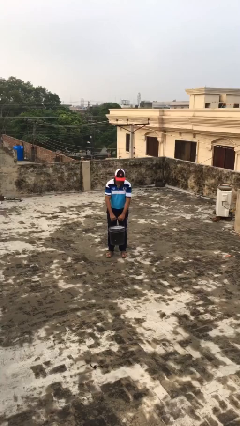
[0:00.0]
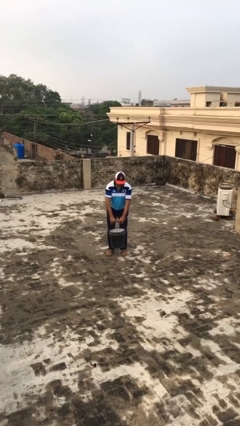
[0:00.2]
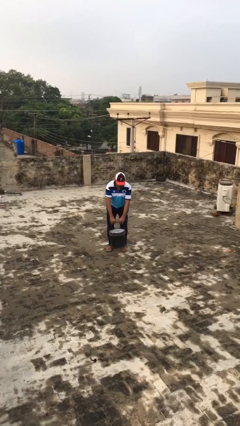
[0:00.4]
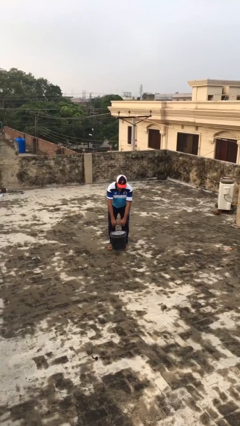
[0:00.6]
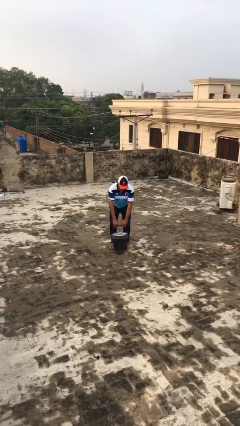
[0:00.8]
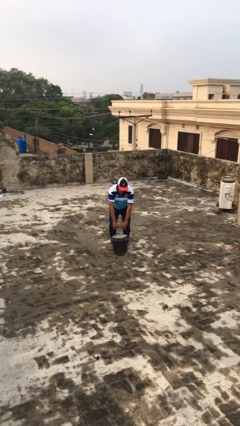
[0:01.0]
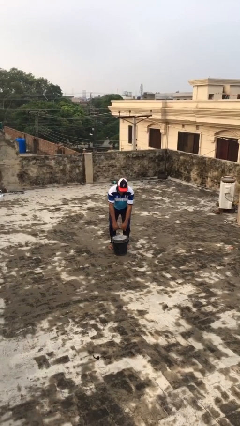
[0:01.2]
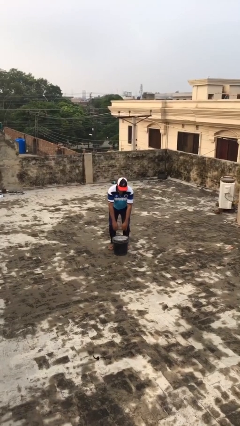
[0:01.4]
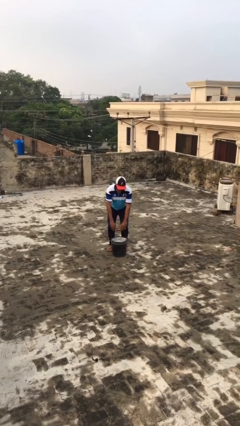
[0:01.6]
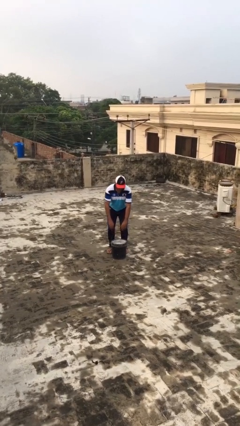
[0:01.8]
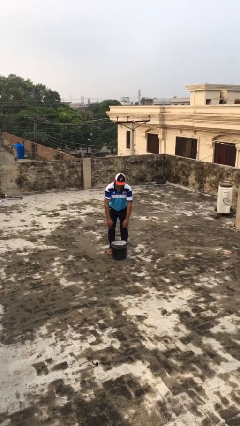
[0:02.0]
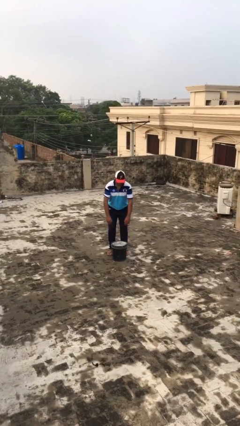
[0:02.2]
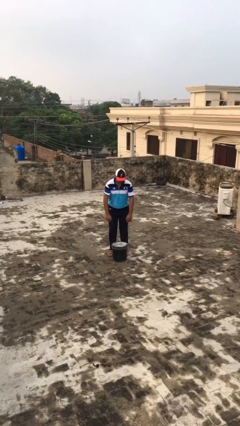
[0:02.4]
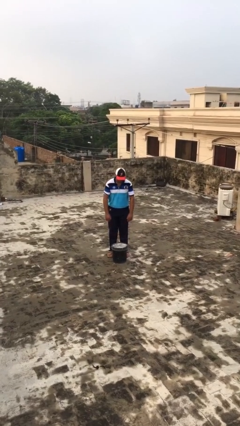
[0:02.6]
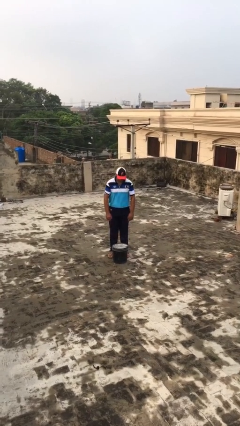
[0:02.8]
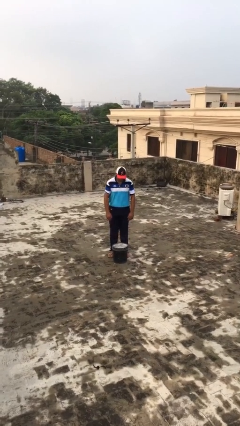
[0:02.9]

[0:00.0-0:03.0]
person puts down object on floor

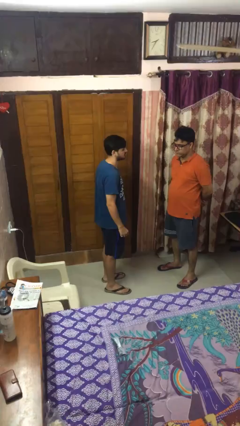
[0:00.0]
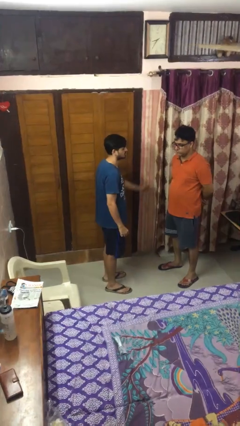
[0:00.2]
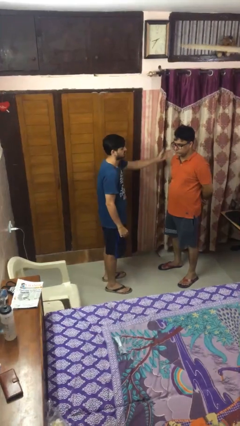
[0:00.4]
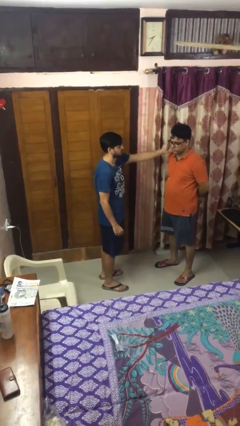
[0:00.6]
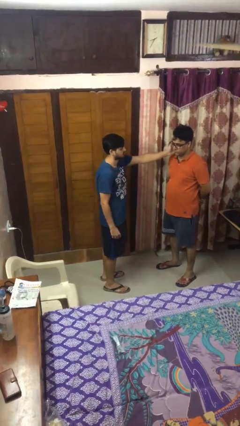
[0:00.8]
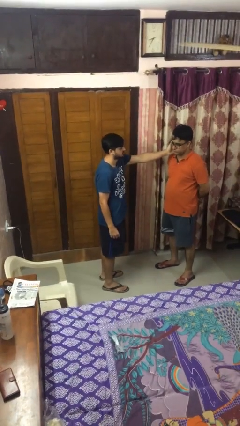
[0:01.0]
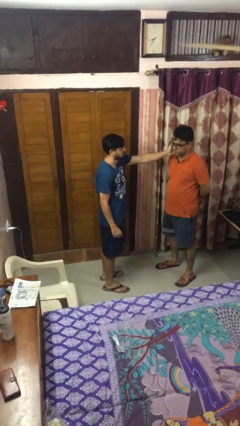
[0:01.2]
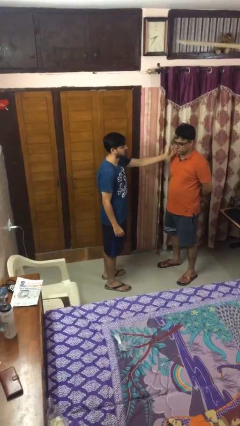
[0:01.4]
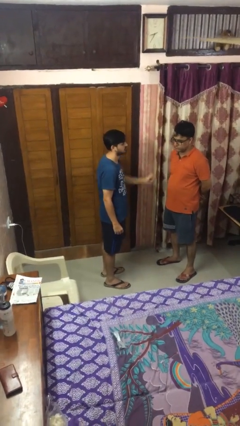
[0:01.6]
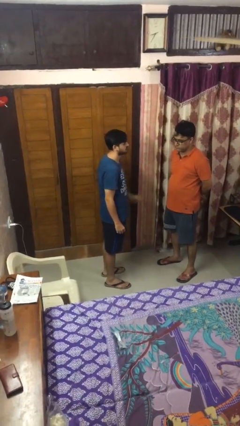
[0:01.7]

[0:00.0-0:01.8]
person touches face of person

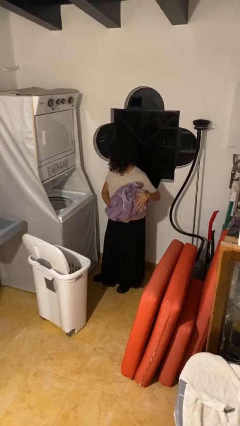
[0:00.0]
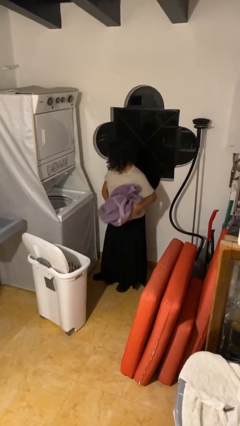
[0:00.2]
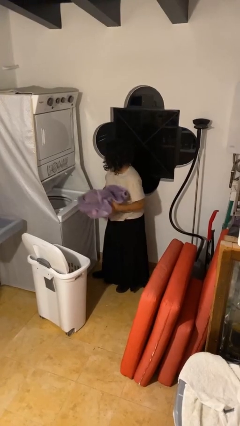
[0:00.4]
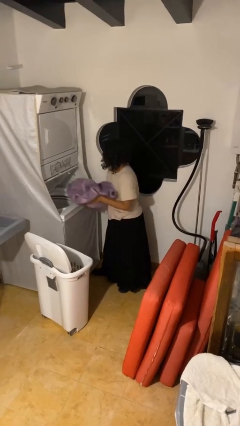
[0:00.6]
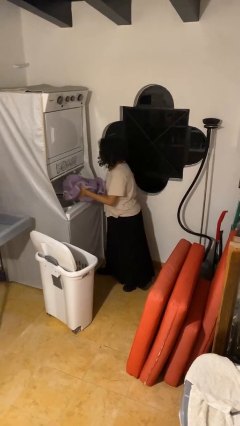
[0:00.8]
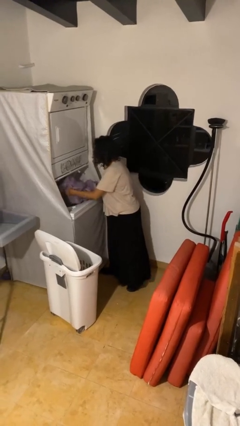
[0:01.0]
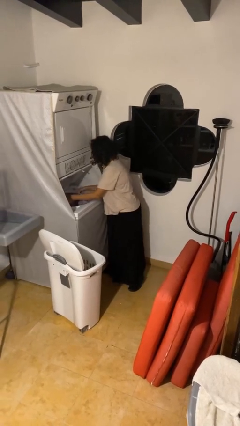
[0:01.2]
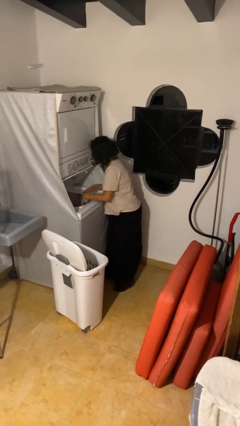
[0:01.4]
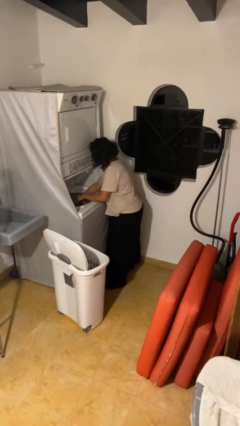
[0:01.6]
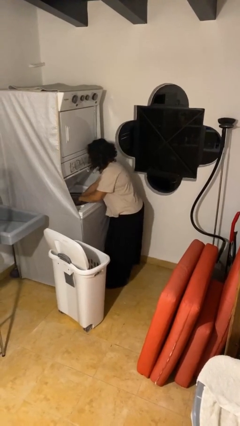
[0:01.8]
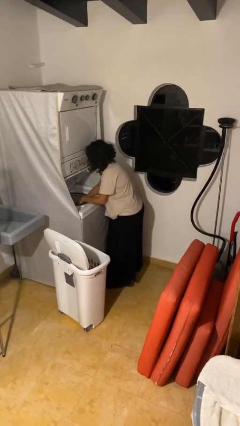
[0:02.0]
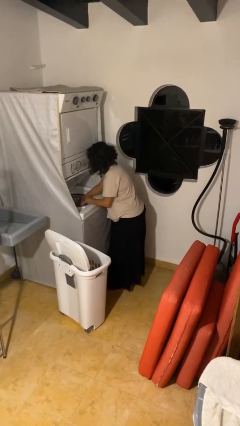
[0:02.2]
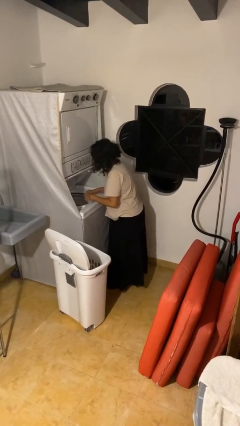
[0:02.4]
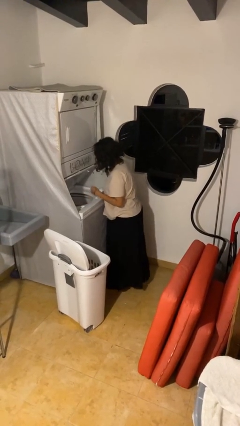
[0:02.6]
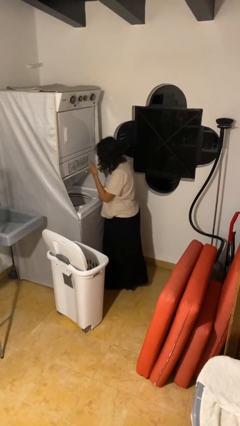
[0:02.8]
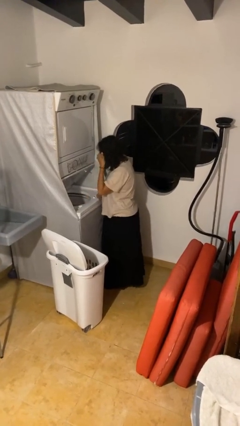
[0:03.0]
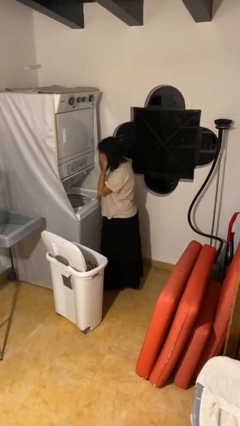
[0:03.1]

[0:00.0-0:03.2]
person loads clotheswasher

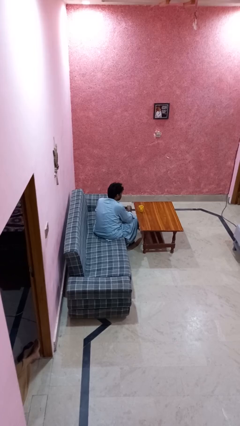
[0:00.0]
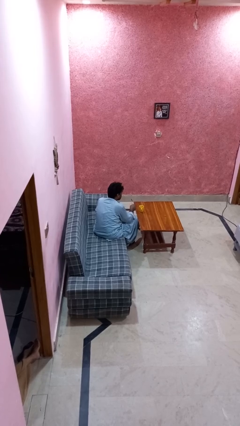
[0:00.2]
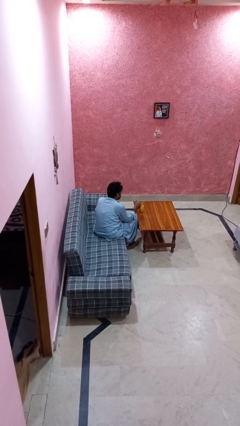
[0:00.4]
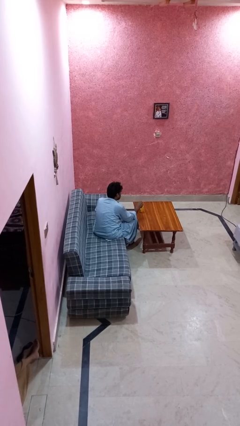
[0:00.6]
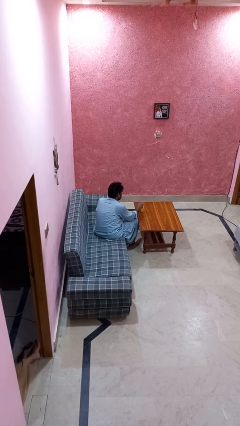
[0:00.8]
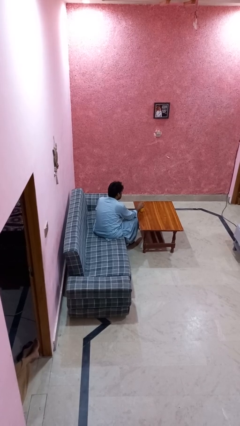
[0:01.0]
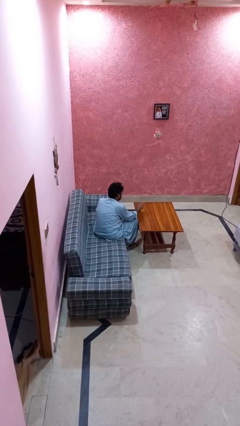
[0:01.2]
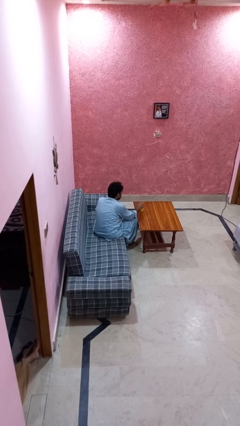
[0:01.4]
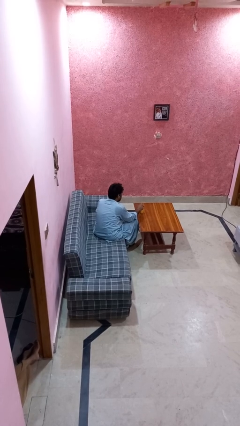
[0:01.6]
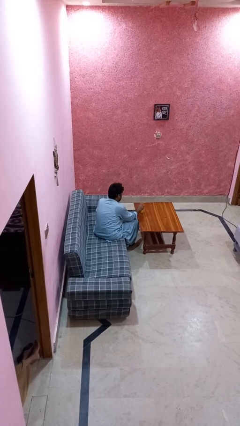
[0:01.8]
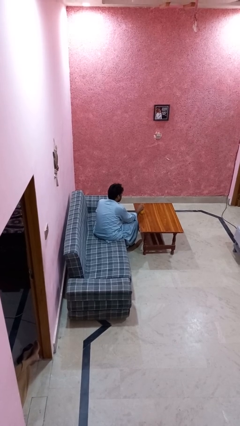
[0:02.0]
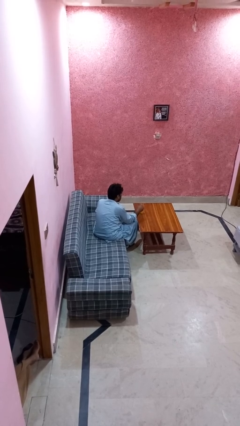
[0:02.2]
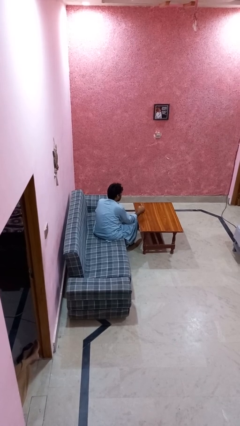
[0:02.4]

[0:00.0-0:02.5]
person stirs mug

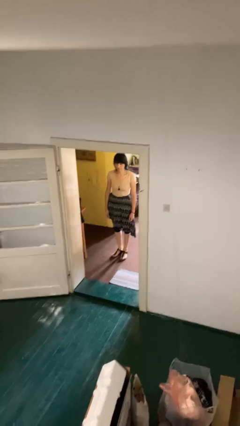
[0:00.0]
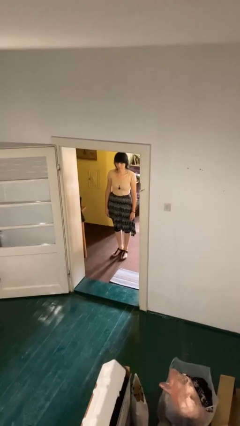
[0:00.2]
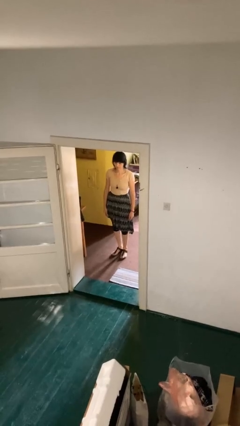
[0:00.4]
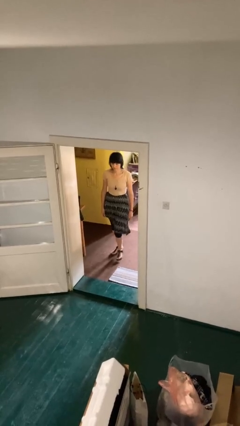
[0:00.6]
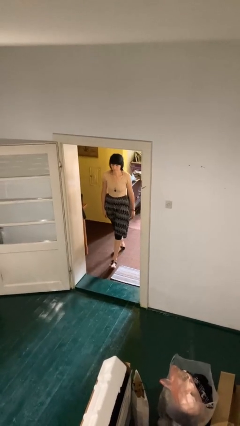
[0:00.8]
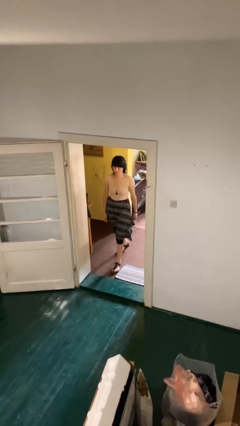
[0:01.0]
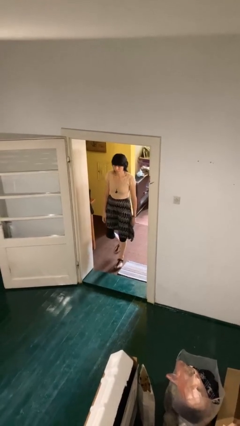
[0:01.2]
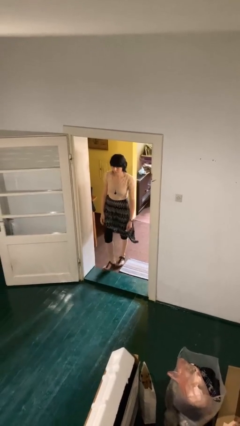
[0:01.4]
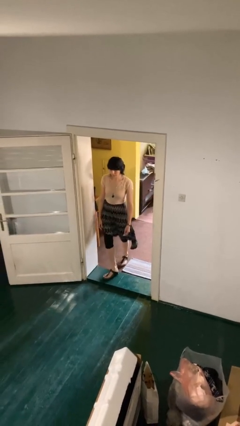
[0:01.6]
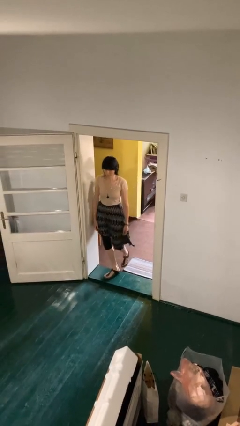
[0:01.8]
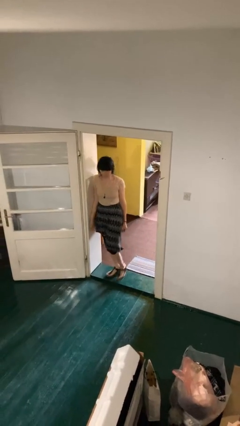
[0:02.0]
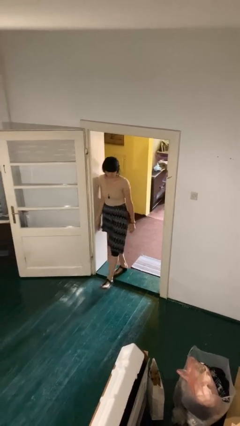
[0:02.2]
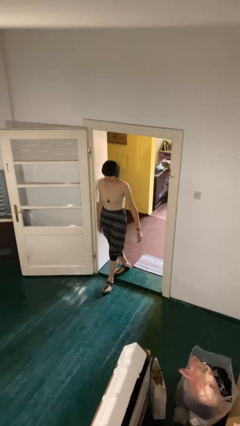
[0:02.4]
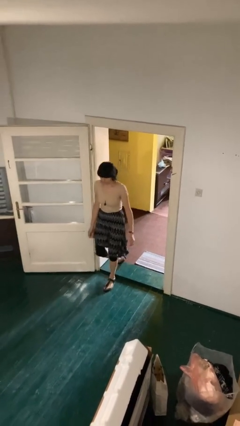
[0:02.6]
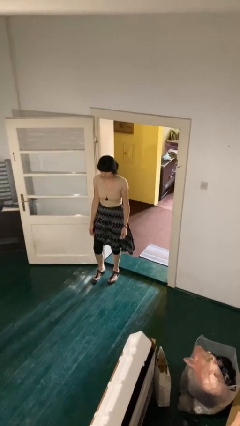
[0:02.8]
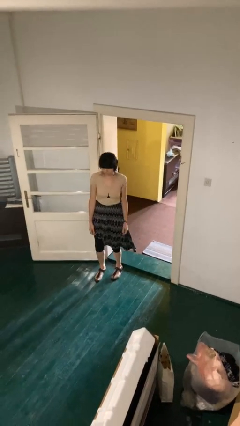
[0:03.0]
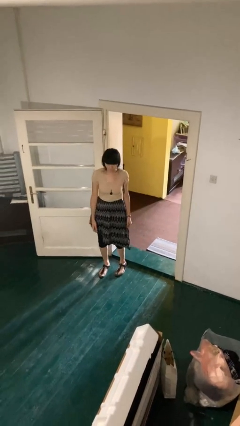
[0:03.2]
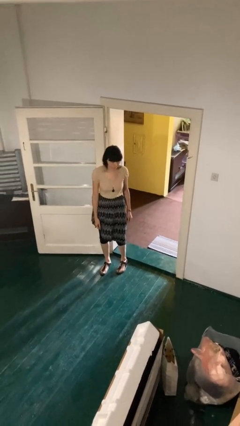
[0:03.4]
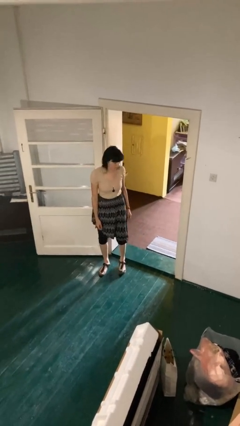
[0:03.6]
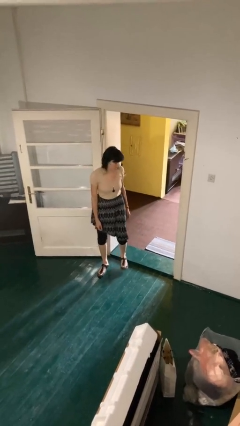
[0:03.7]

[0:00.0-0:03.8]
person bumps into wall

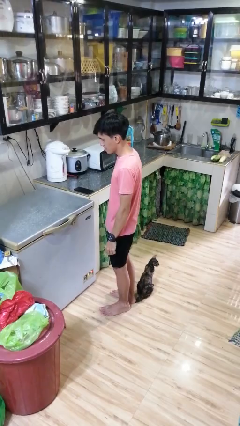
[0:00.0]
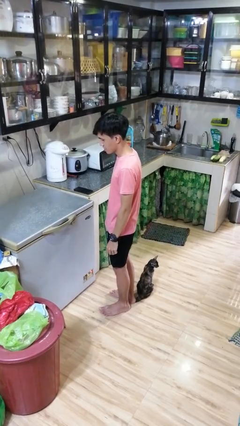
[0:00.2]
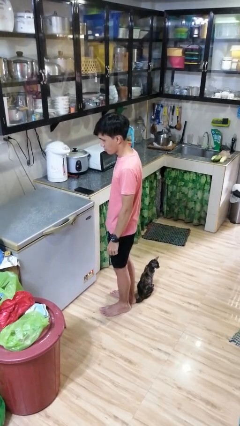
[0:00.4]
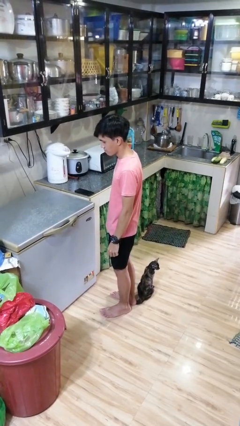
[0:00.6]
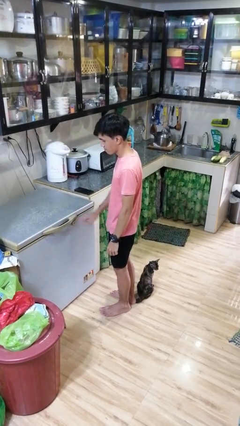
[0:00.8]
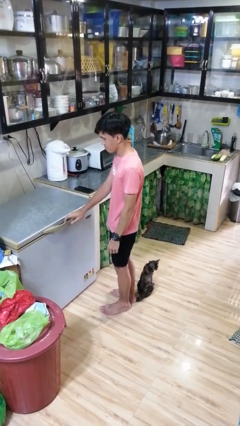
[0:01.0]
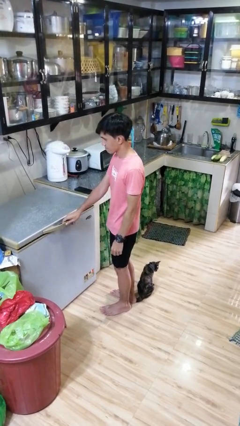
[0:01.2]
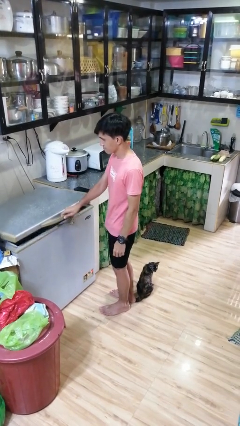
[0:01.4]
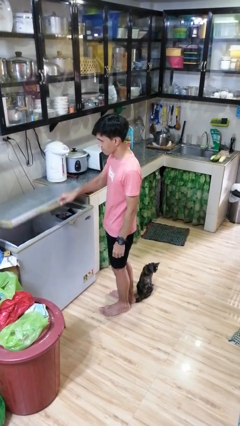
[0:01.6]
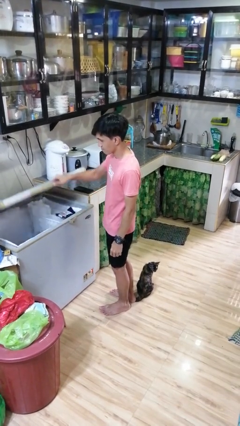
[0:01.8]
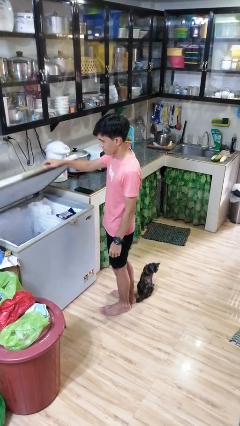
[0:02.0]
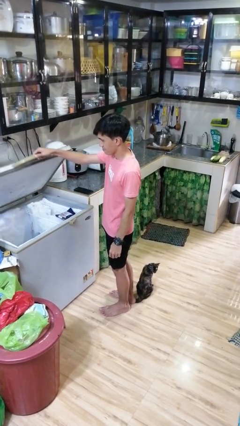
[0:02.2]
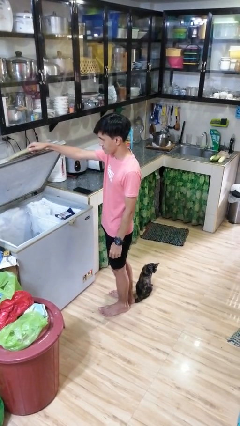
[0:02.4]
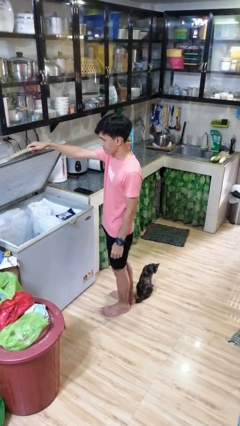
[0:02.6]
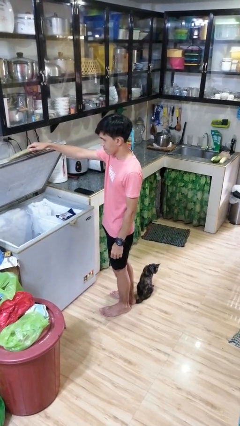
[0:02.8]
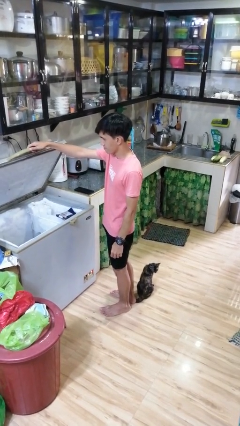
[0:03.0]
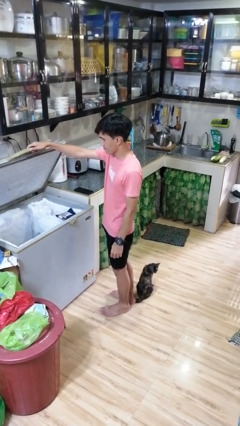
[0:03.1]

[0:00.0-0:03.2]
person opens refrigerator
